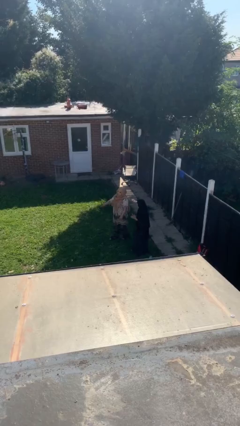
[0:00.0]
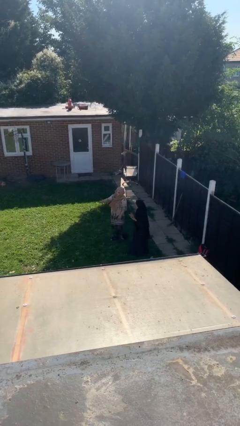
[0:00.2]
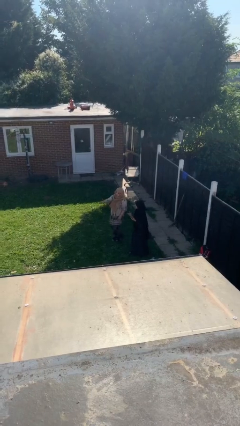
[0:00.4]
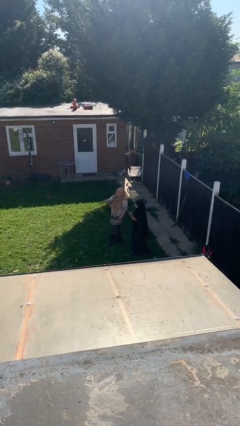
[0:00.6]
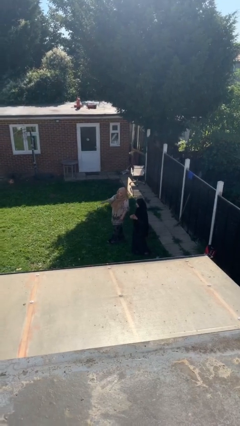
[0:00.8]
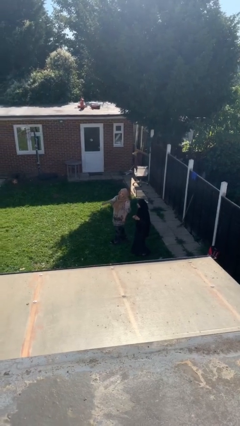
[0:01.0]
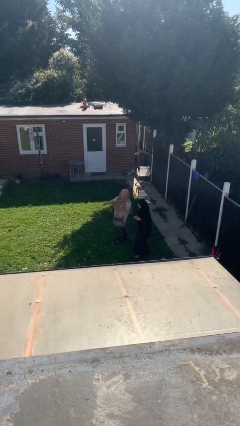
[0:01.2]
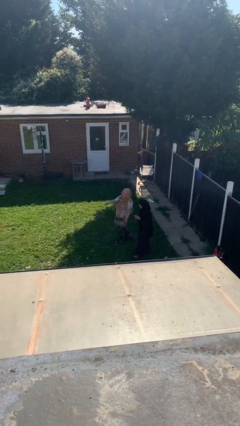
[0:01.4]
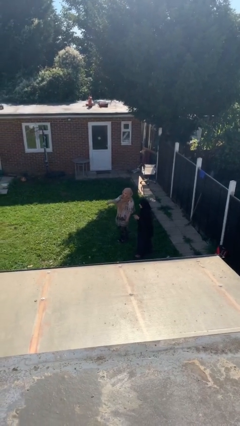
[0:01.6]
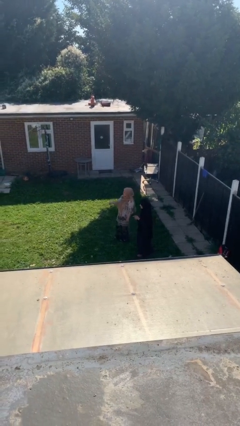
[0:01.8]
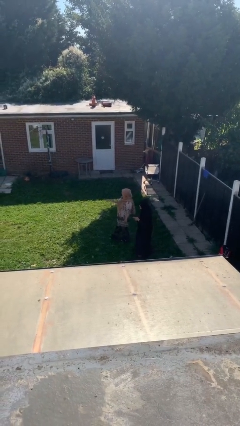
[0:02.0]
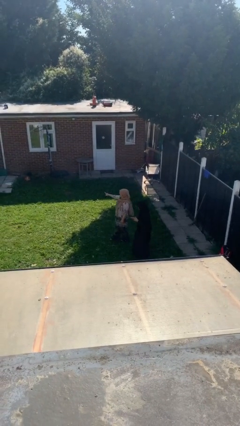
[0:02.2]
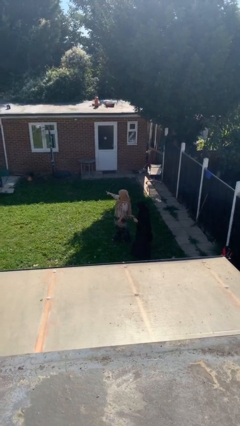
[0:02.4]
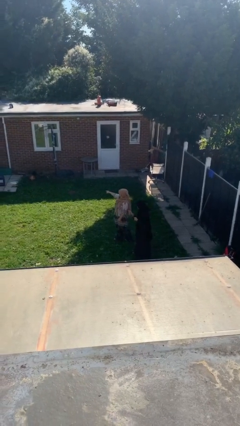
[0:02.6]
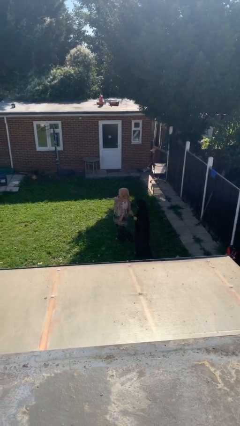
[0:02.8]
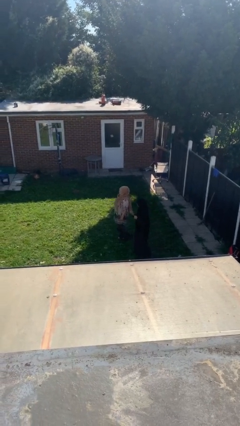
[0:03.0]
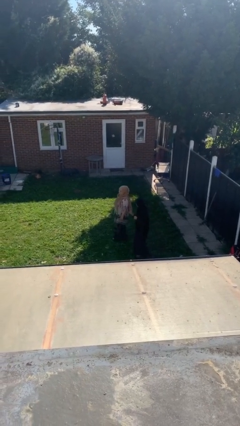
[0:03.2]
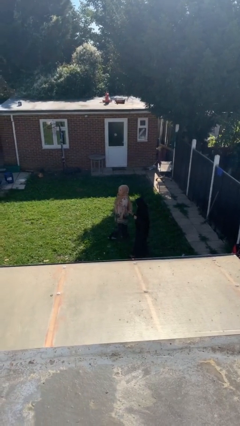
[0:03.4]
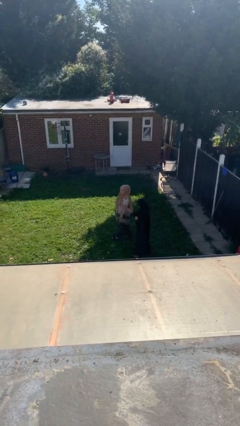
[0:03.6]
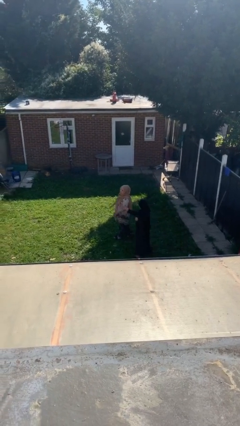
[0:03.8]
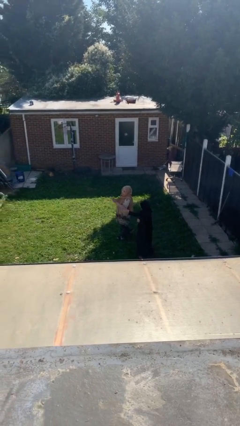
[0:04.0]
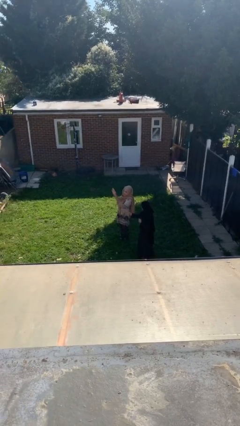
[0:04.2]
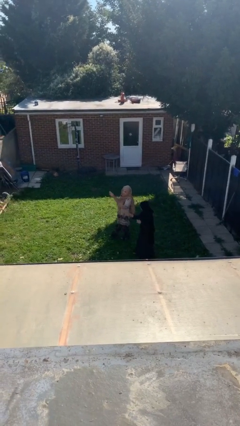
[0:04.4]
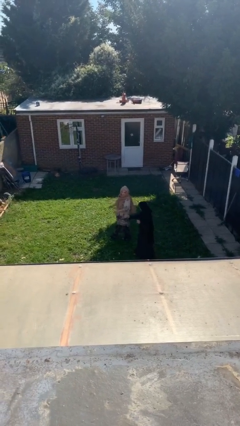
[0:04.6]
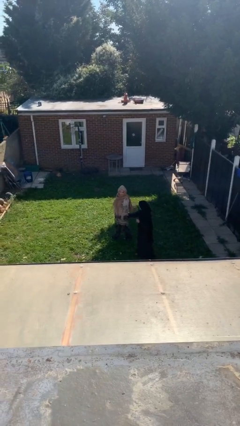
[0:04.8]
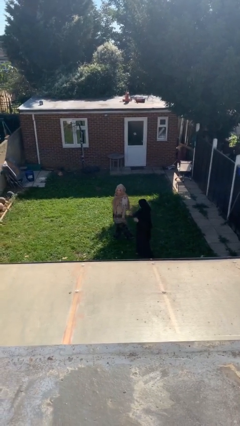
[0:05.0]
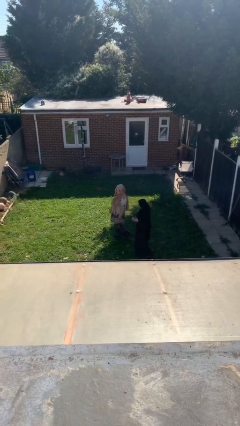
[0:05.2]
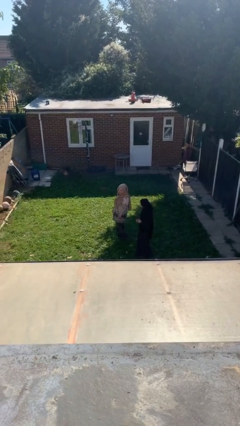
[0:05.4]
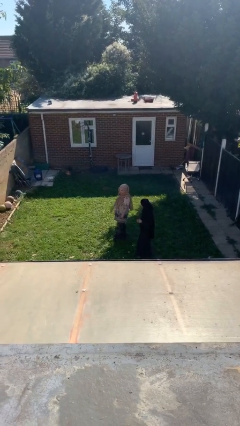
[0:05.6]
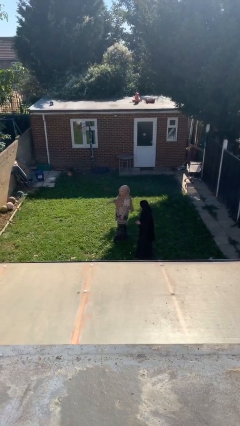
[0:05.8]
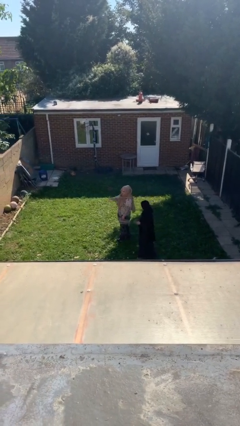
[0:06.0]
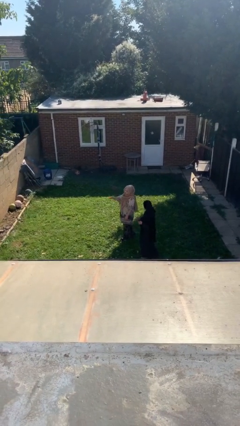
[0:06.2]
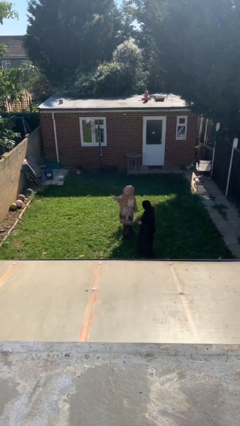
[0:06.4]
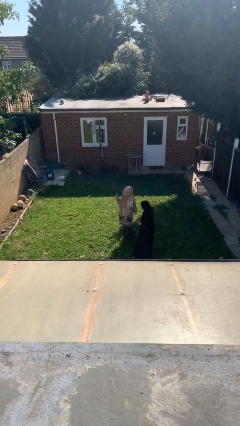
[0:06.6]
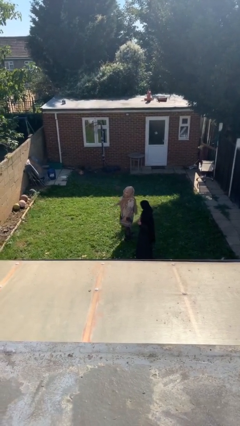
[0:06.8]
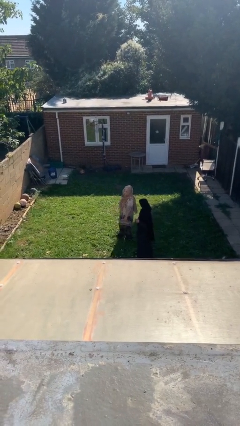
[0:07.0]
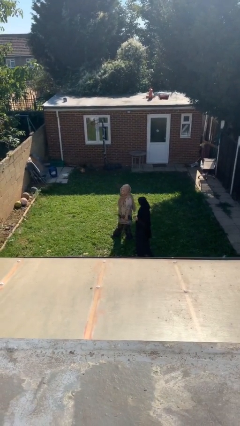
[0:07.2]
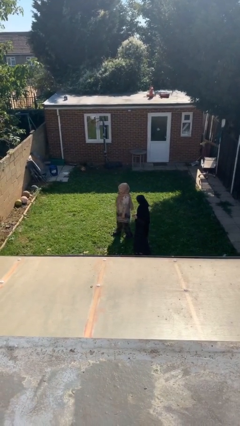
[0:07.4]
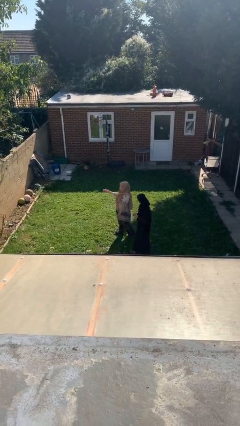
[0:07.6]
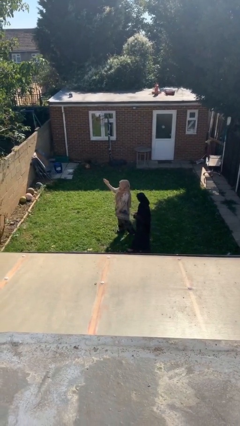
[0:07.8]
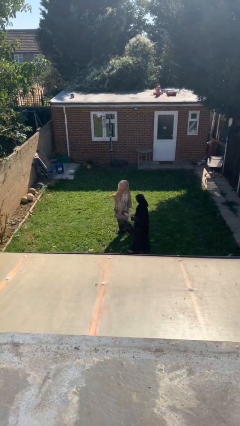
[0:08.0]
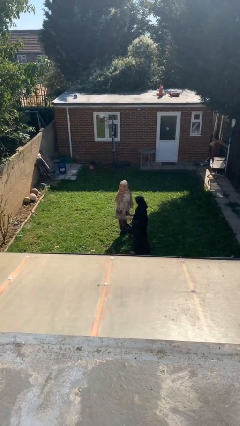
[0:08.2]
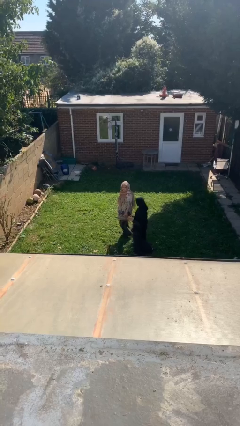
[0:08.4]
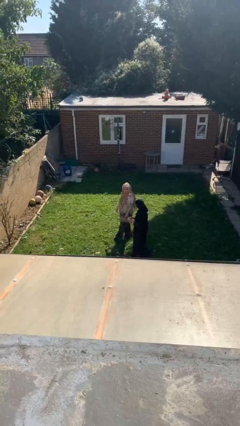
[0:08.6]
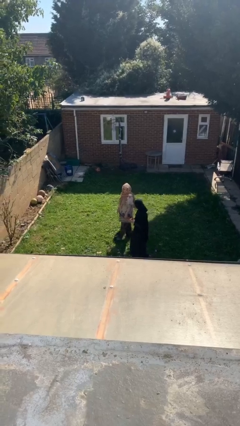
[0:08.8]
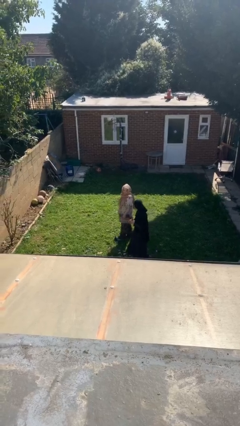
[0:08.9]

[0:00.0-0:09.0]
person talks to person

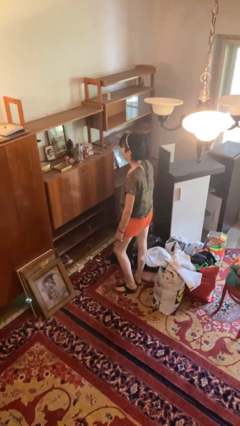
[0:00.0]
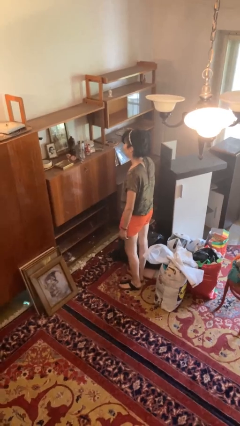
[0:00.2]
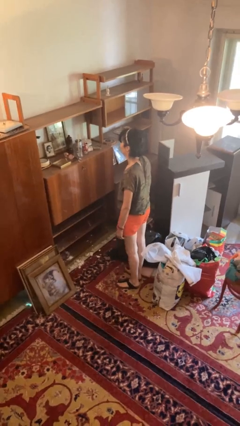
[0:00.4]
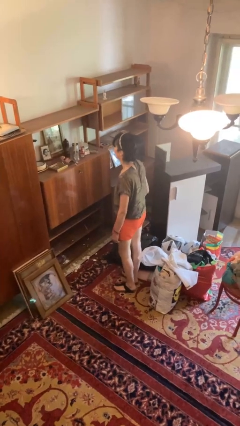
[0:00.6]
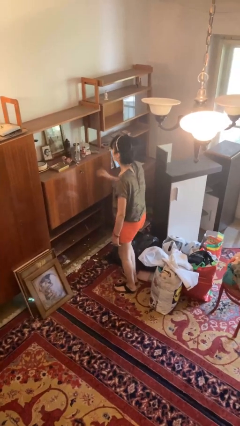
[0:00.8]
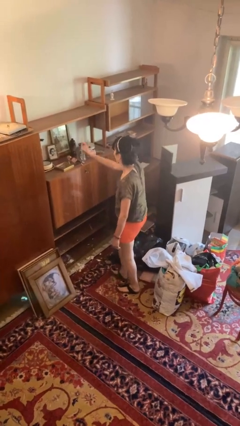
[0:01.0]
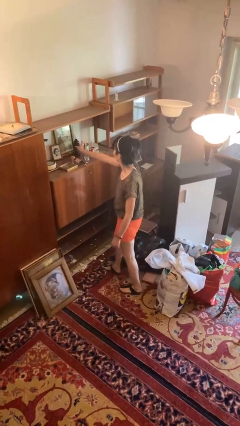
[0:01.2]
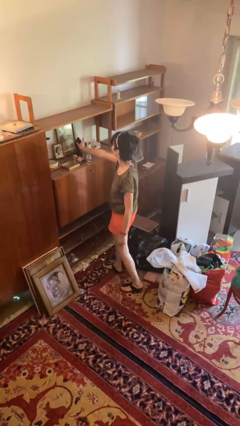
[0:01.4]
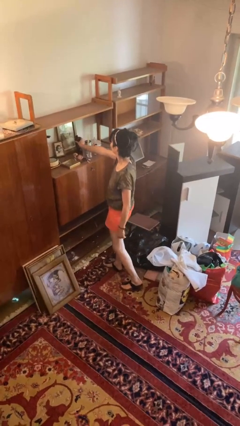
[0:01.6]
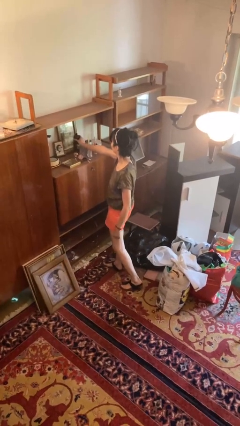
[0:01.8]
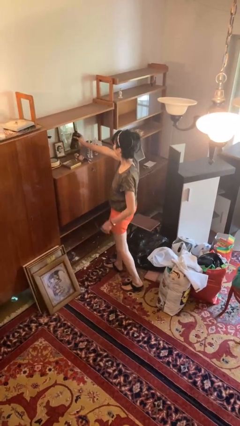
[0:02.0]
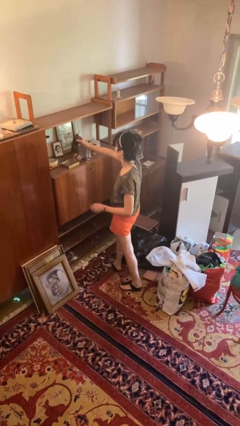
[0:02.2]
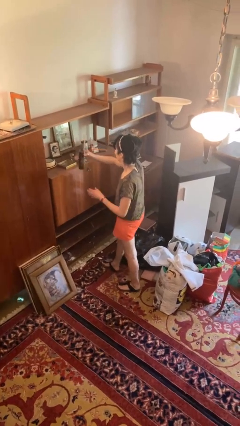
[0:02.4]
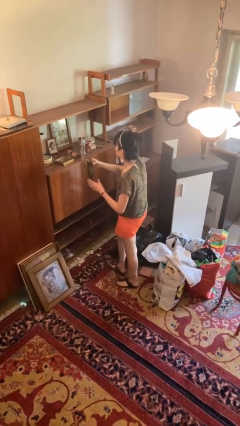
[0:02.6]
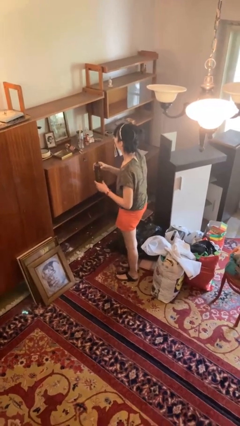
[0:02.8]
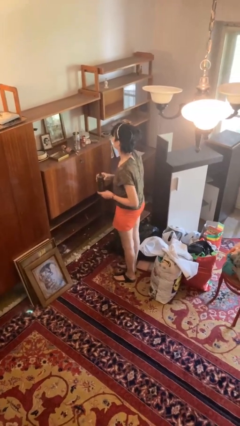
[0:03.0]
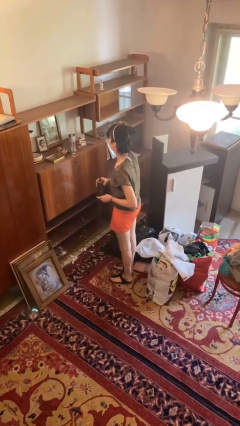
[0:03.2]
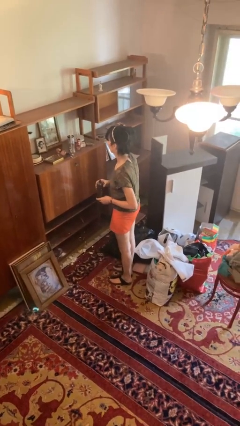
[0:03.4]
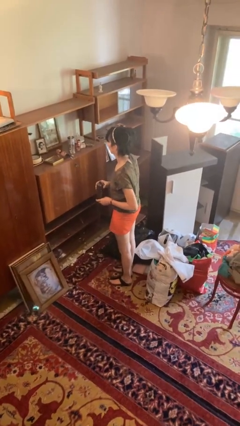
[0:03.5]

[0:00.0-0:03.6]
person picks up object from countertop

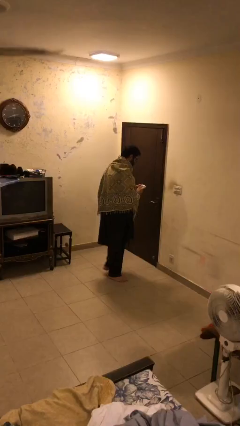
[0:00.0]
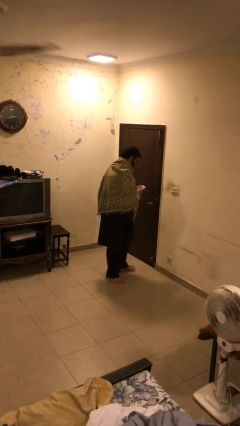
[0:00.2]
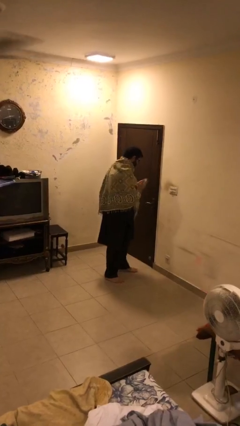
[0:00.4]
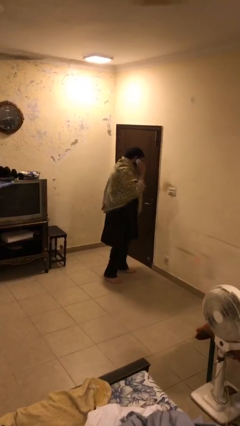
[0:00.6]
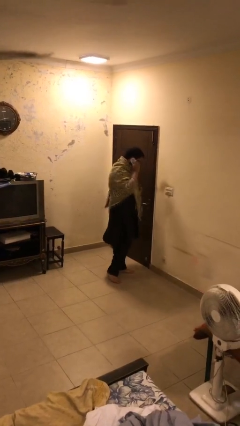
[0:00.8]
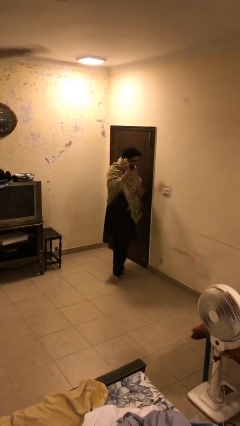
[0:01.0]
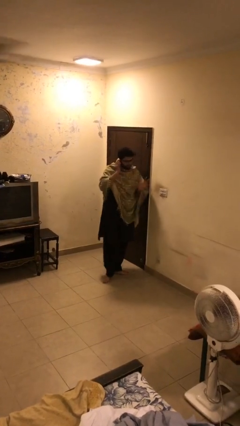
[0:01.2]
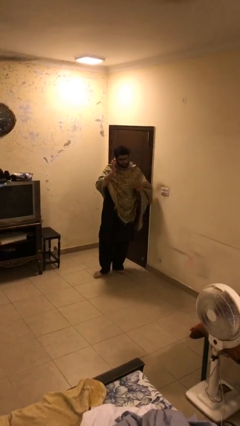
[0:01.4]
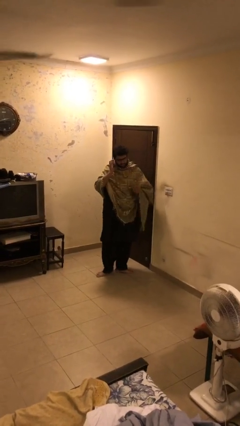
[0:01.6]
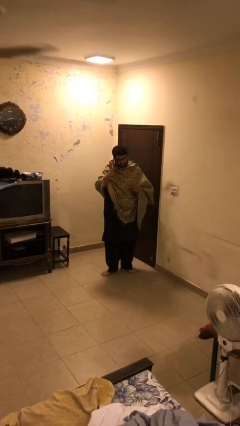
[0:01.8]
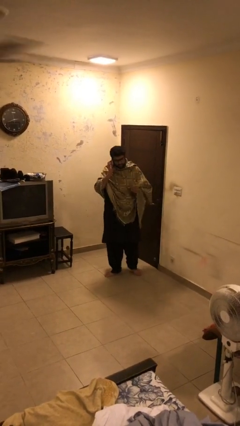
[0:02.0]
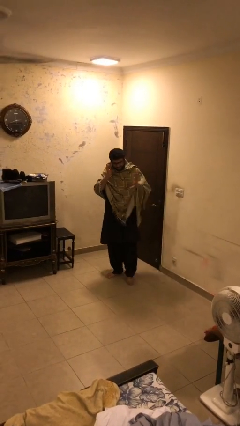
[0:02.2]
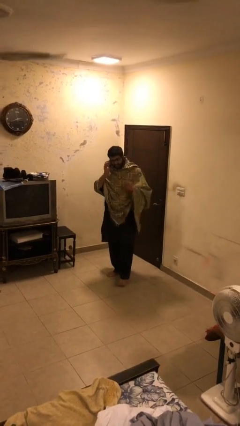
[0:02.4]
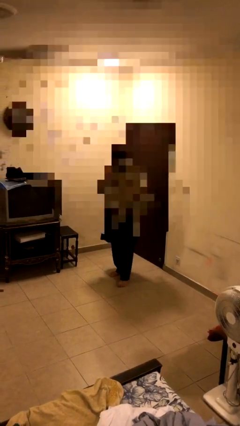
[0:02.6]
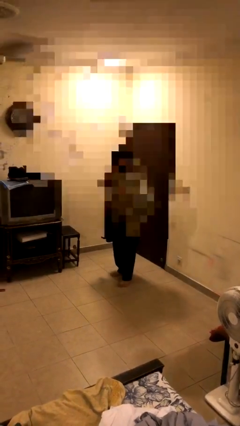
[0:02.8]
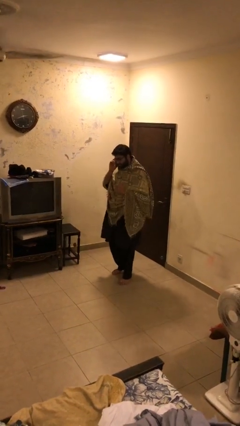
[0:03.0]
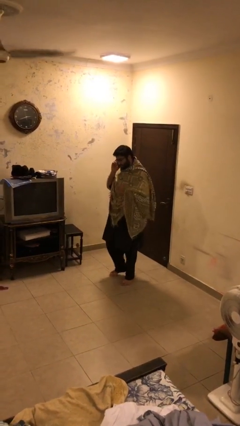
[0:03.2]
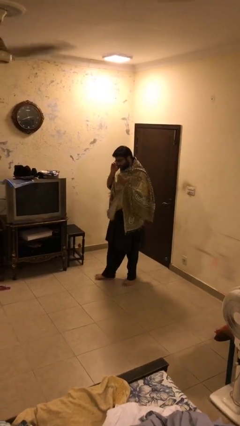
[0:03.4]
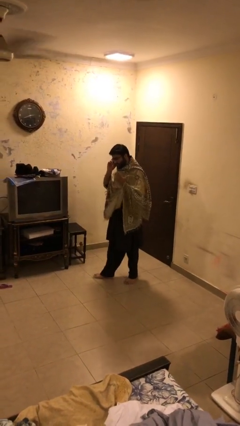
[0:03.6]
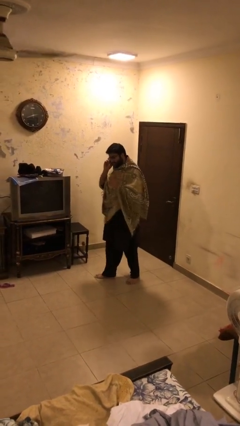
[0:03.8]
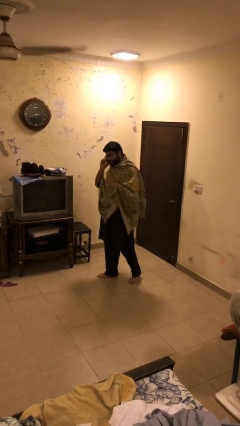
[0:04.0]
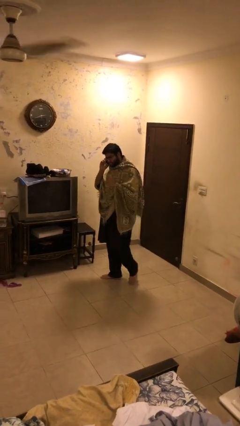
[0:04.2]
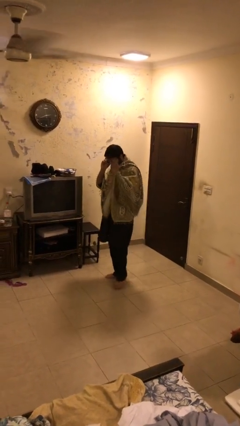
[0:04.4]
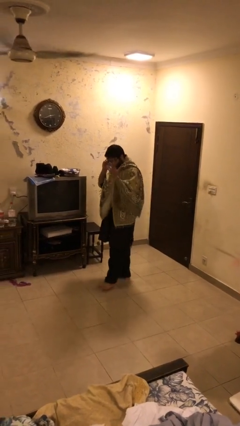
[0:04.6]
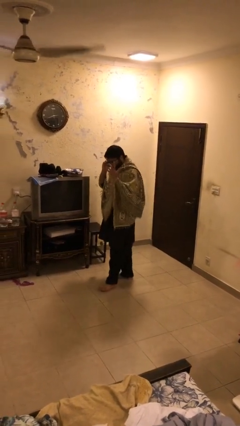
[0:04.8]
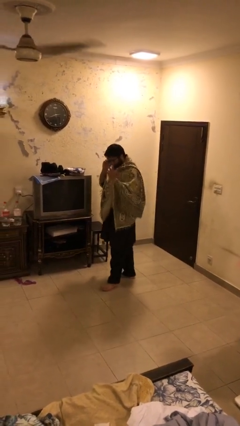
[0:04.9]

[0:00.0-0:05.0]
person talks on phone
